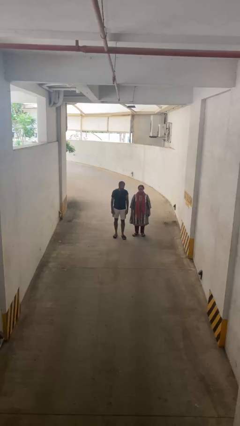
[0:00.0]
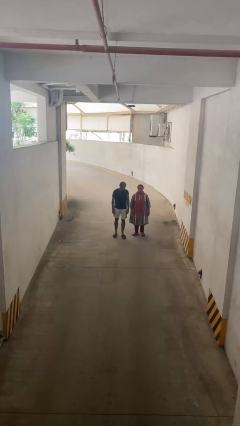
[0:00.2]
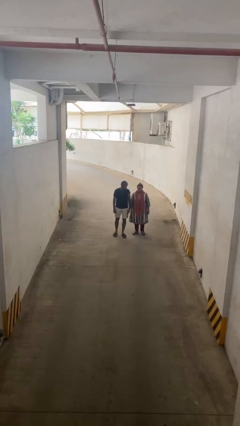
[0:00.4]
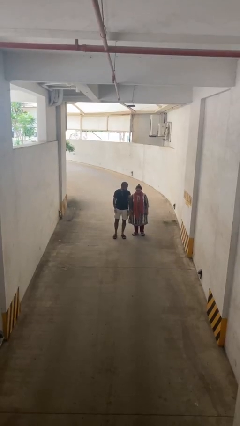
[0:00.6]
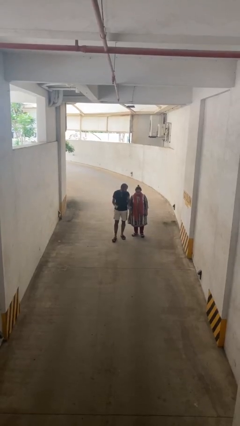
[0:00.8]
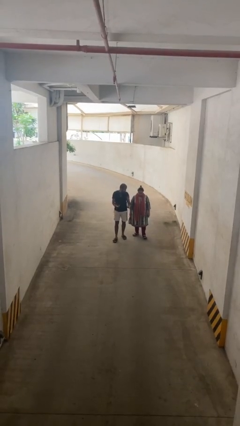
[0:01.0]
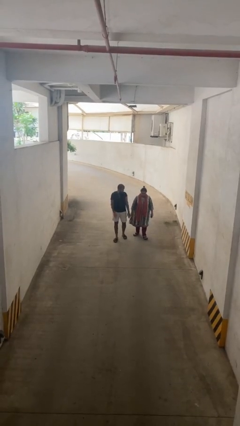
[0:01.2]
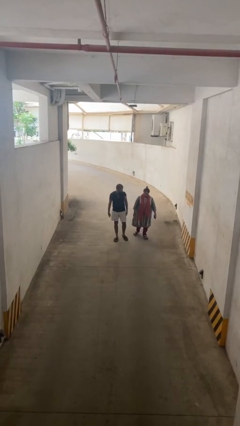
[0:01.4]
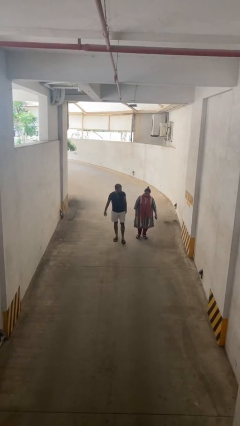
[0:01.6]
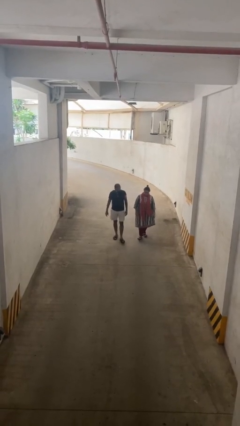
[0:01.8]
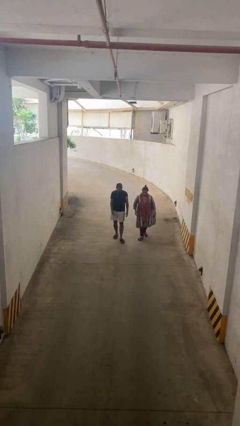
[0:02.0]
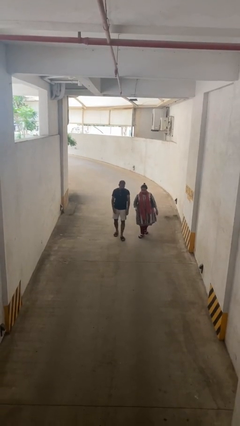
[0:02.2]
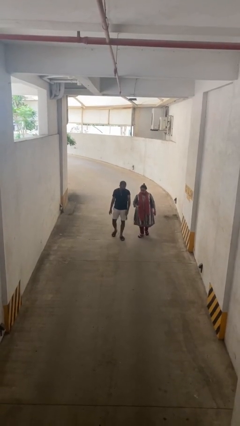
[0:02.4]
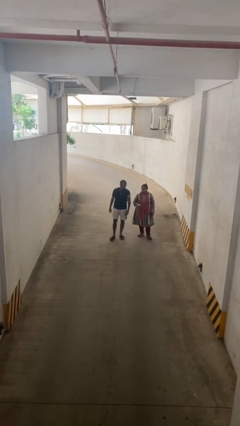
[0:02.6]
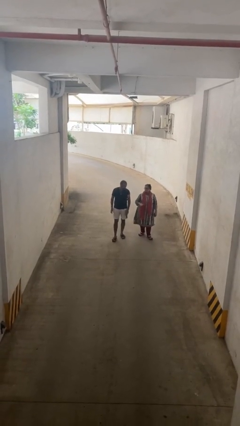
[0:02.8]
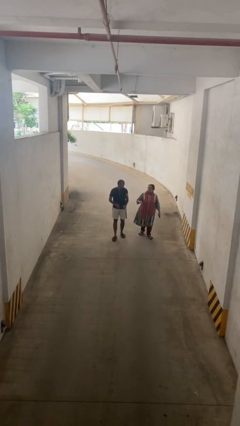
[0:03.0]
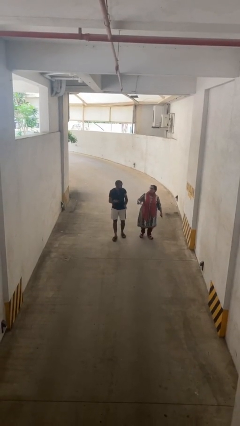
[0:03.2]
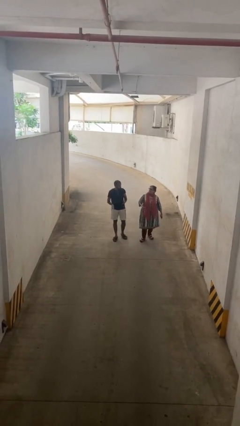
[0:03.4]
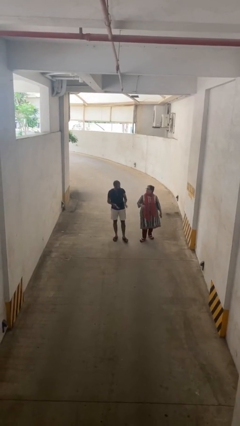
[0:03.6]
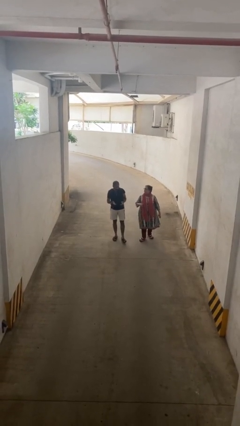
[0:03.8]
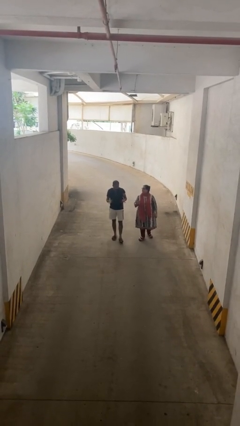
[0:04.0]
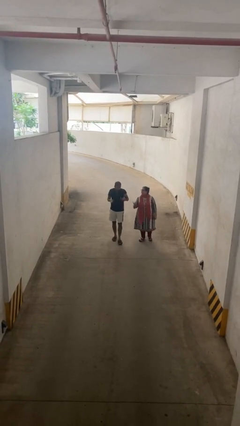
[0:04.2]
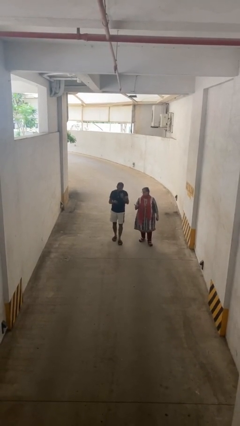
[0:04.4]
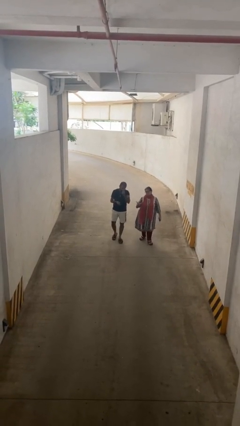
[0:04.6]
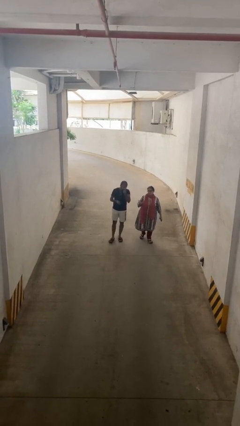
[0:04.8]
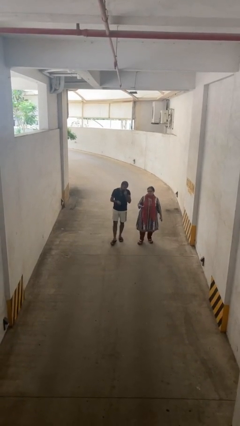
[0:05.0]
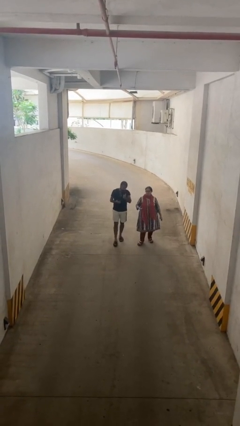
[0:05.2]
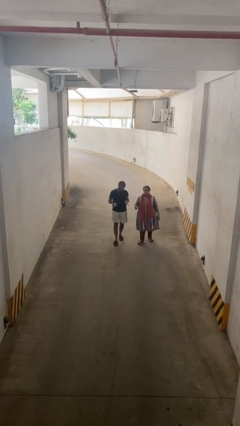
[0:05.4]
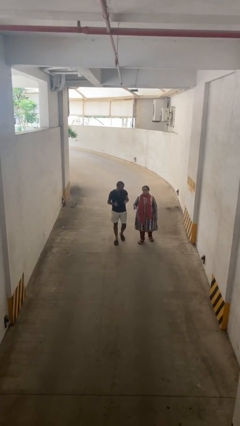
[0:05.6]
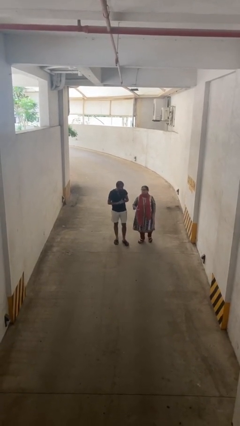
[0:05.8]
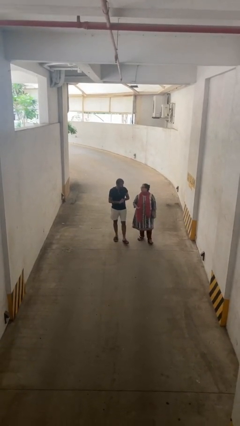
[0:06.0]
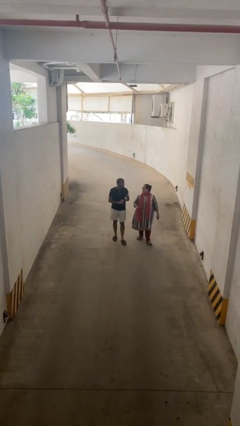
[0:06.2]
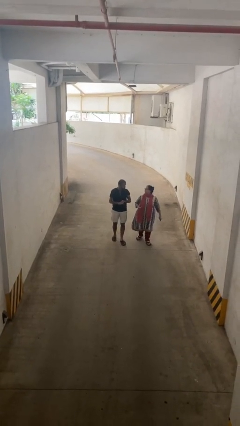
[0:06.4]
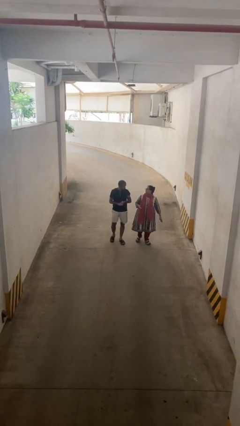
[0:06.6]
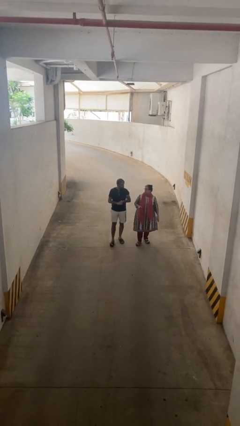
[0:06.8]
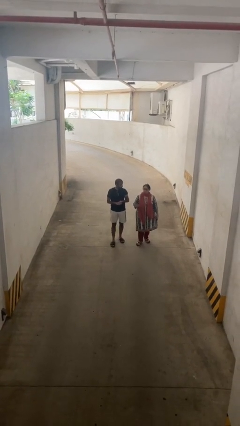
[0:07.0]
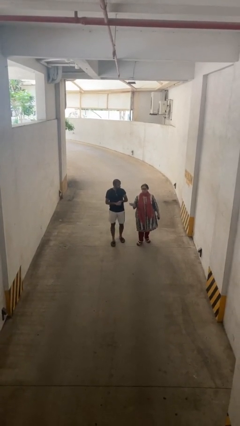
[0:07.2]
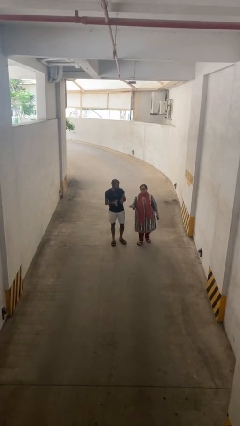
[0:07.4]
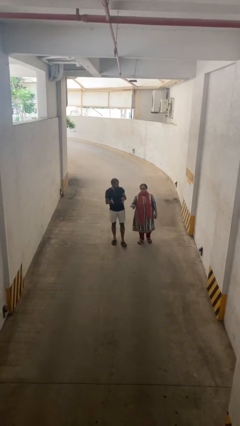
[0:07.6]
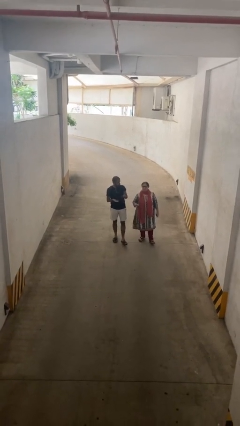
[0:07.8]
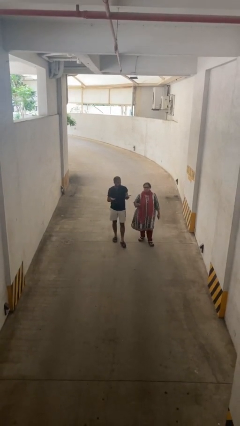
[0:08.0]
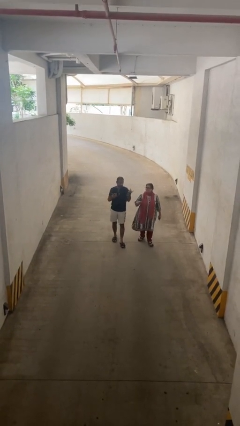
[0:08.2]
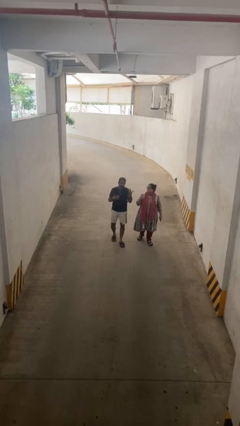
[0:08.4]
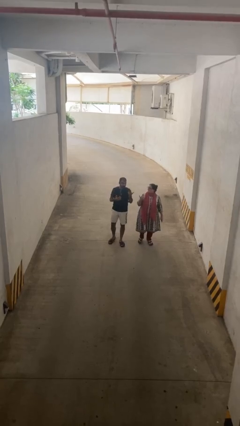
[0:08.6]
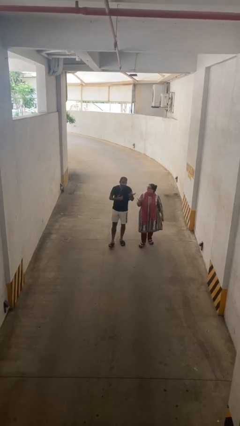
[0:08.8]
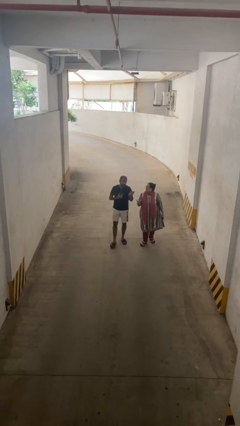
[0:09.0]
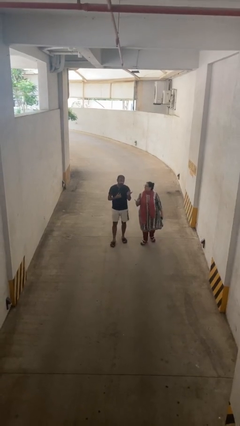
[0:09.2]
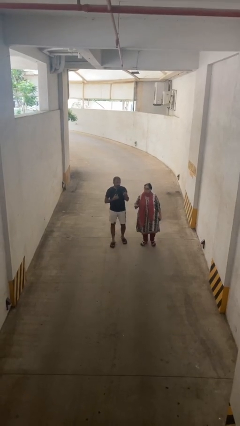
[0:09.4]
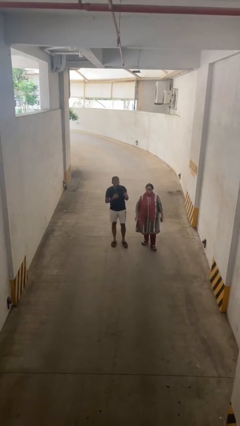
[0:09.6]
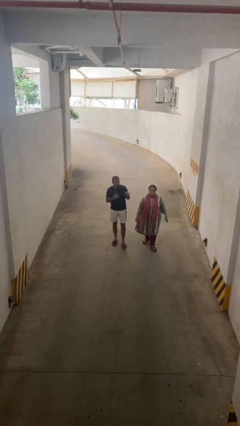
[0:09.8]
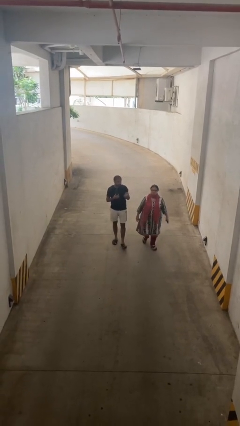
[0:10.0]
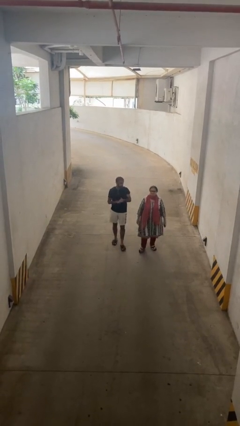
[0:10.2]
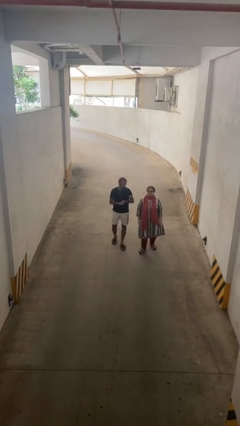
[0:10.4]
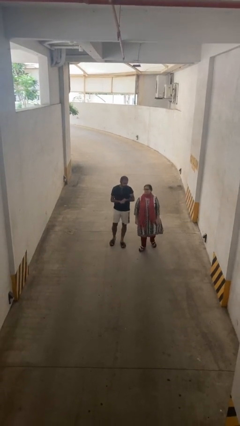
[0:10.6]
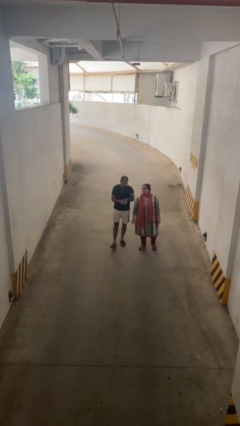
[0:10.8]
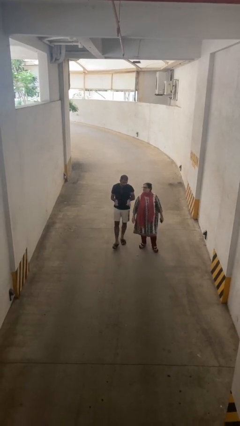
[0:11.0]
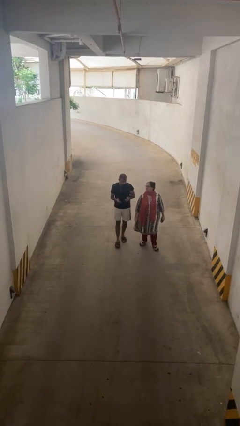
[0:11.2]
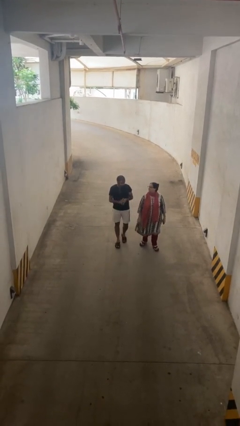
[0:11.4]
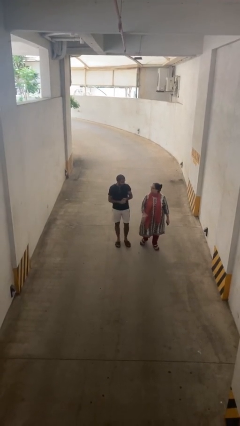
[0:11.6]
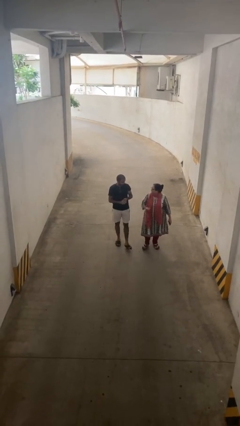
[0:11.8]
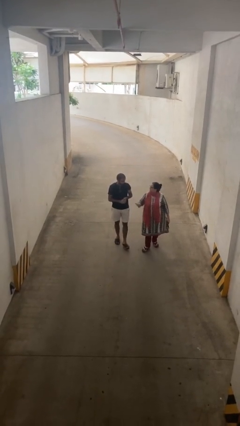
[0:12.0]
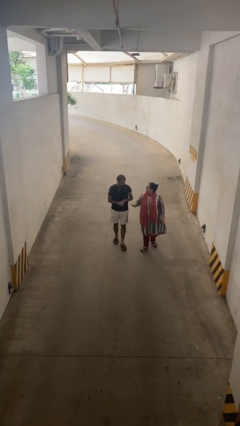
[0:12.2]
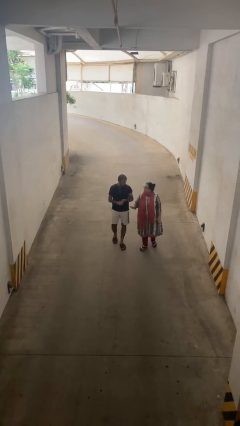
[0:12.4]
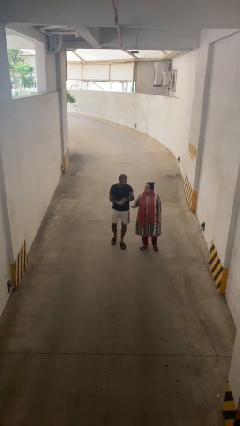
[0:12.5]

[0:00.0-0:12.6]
person talks to person

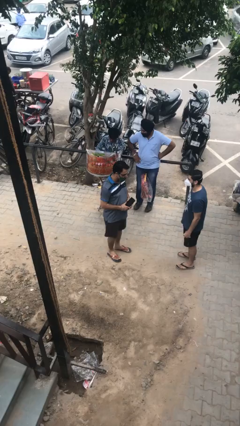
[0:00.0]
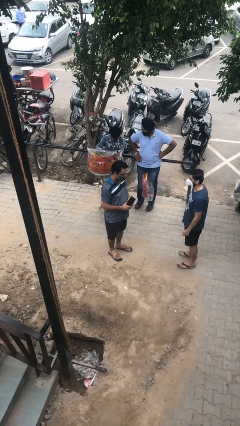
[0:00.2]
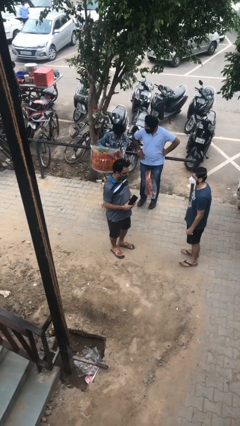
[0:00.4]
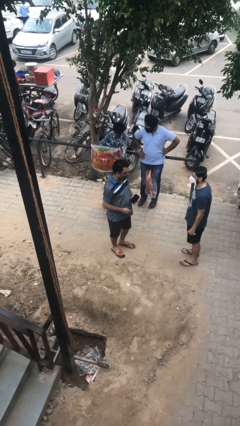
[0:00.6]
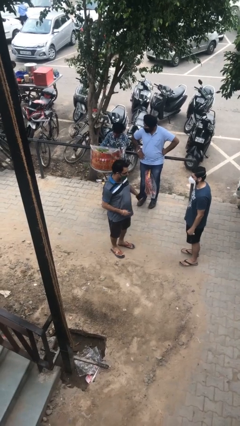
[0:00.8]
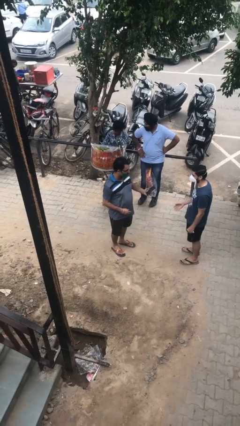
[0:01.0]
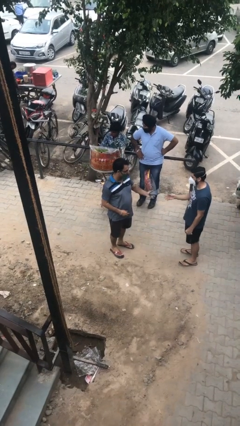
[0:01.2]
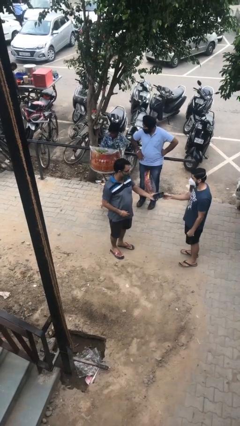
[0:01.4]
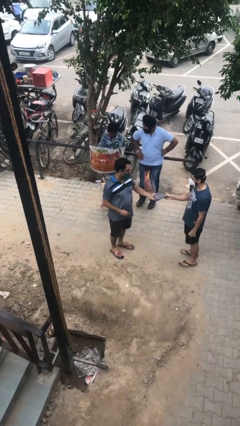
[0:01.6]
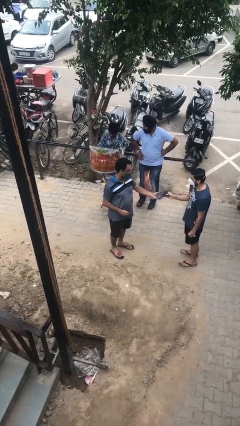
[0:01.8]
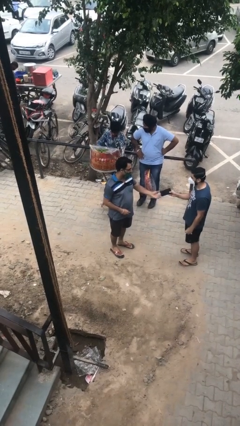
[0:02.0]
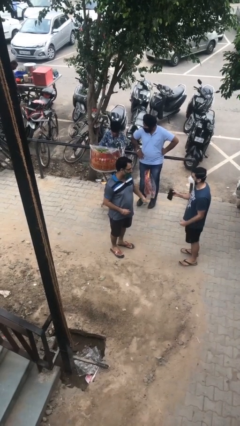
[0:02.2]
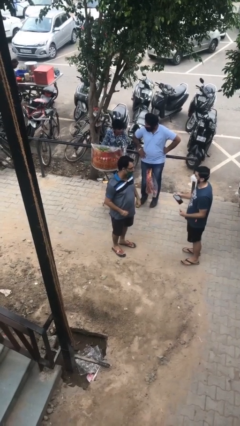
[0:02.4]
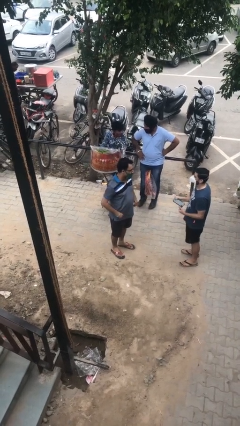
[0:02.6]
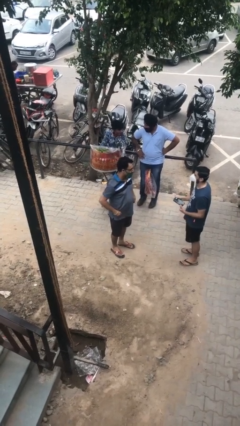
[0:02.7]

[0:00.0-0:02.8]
person transfers object to person

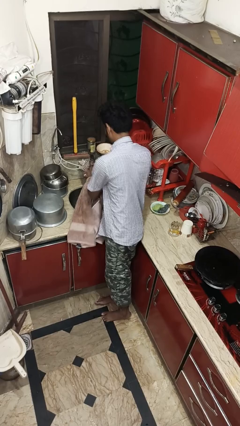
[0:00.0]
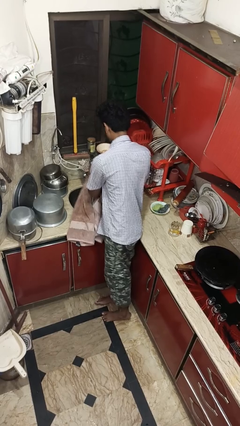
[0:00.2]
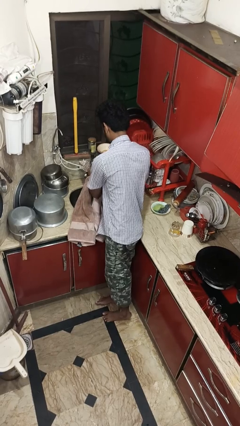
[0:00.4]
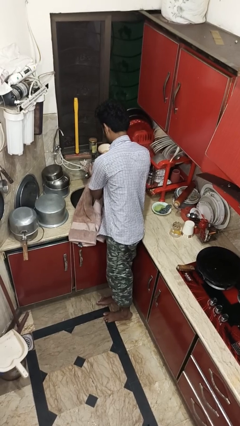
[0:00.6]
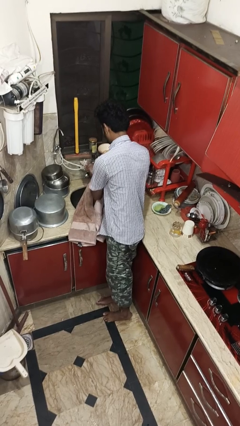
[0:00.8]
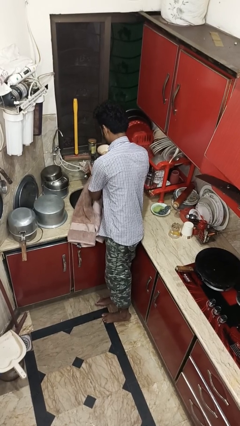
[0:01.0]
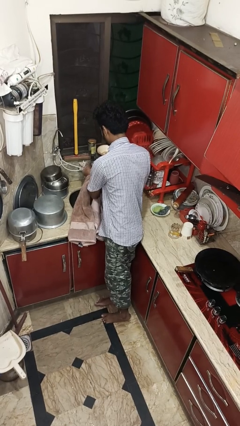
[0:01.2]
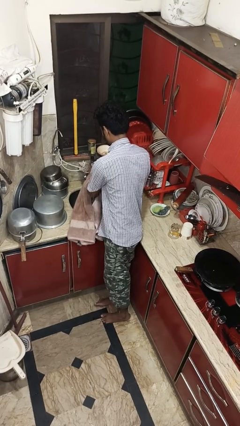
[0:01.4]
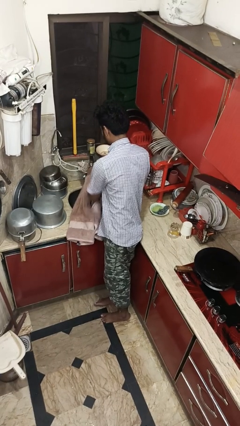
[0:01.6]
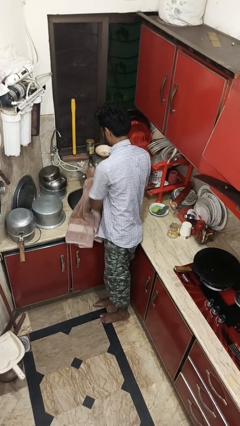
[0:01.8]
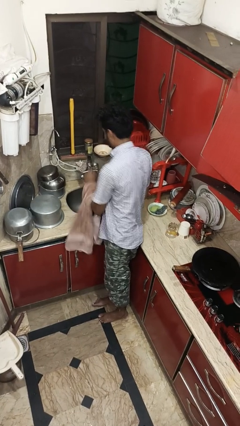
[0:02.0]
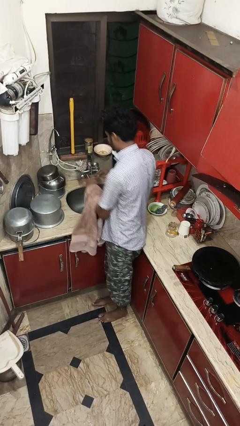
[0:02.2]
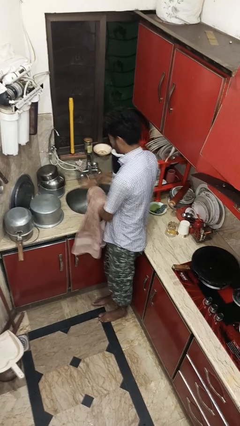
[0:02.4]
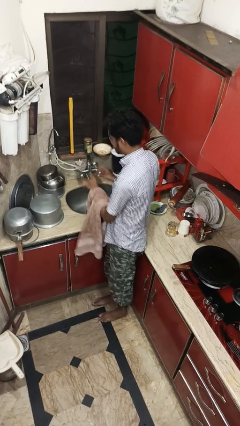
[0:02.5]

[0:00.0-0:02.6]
person washes hands
